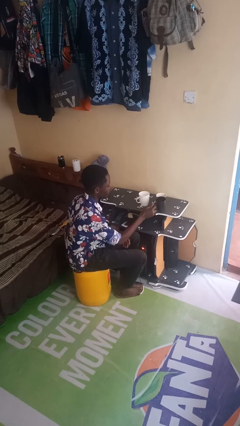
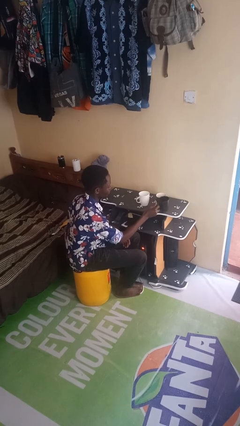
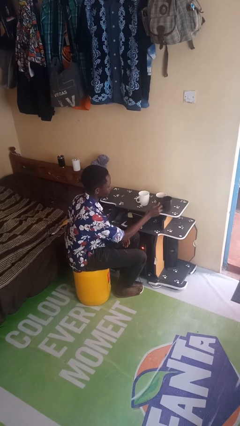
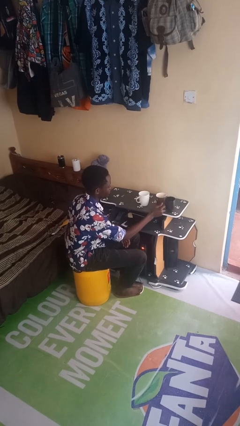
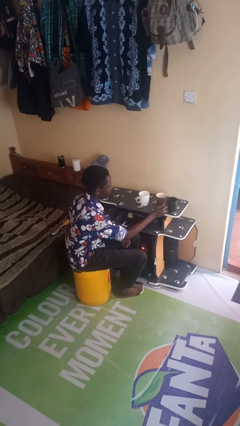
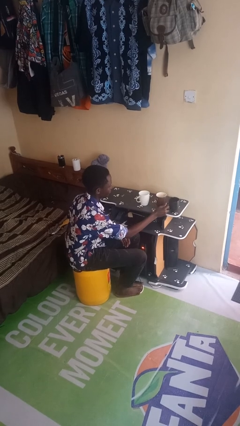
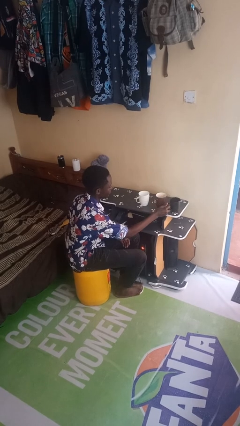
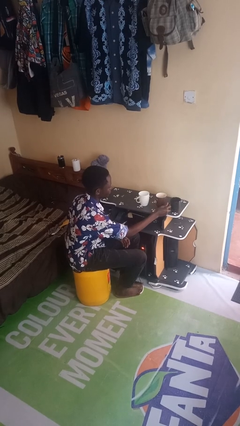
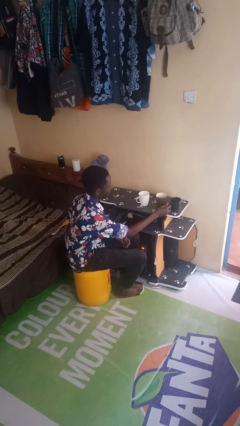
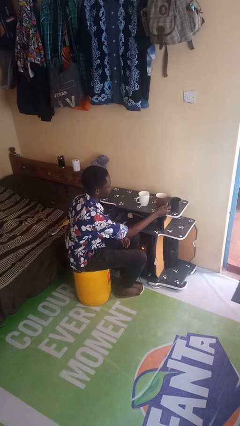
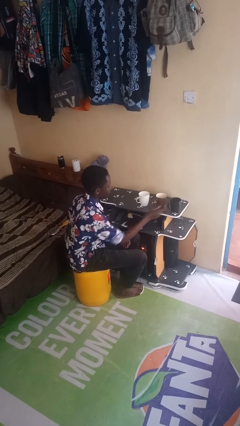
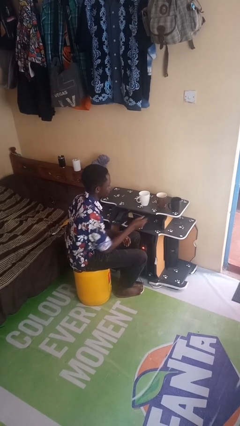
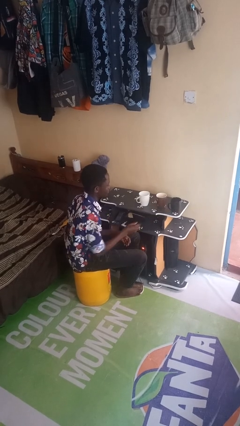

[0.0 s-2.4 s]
person puts down object on table

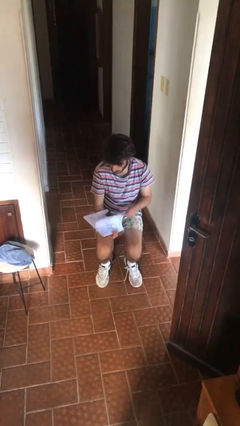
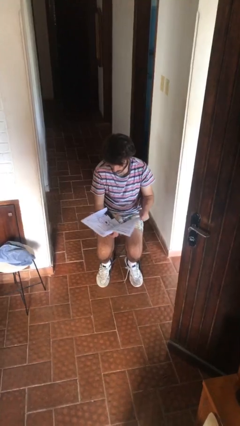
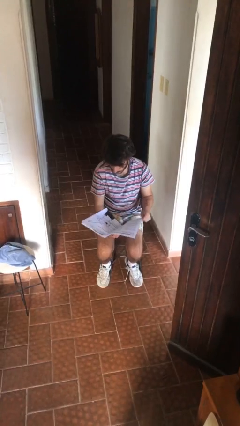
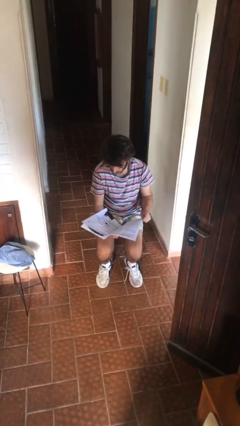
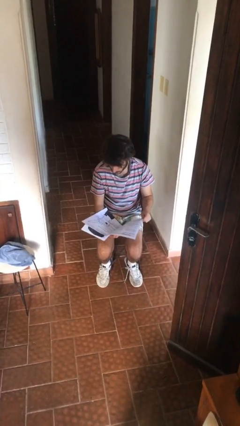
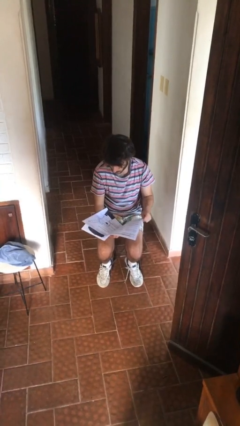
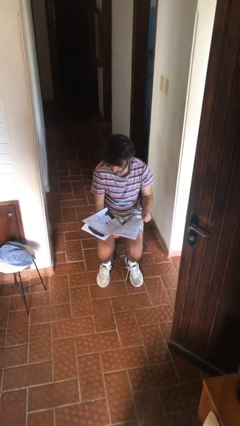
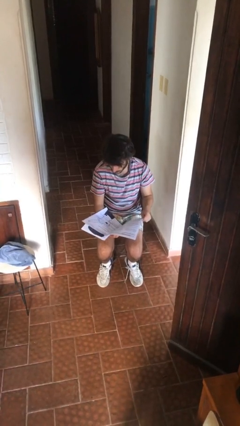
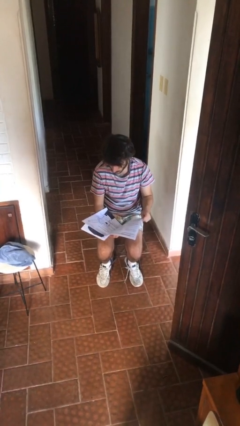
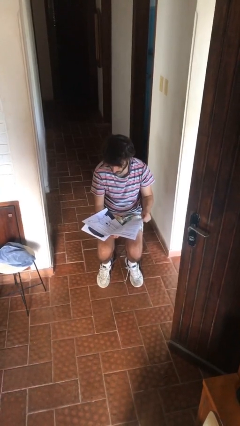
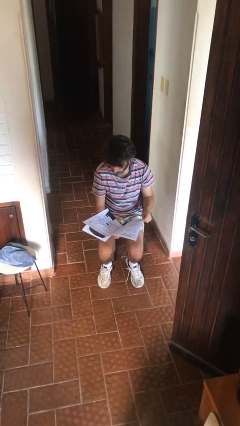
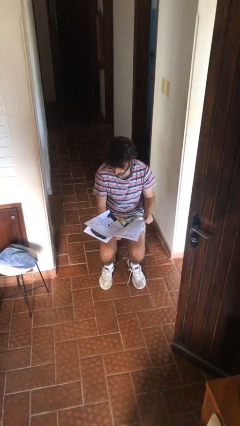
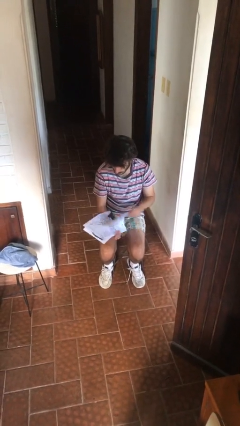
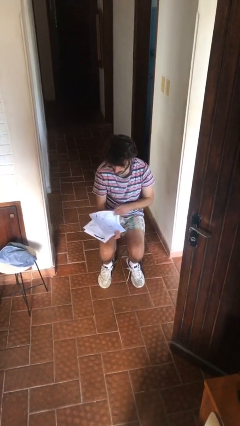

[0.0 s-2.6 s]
person reads document

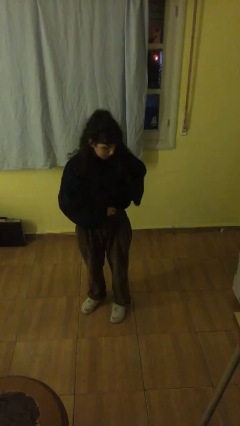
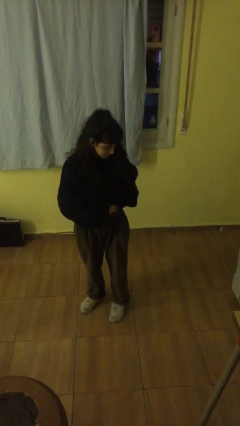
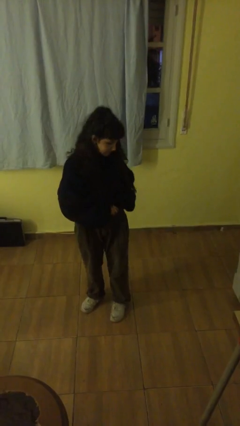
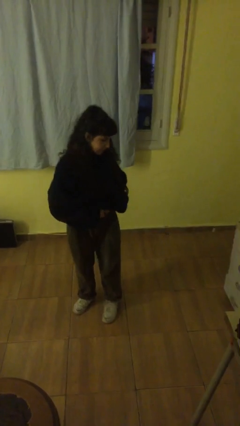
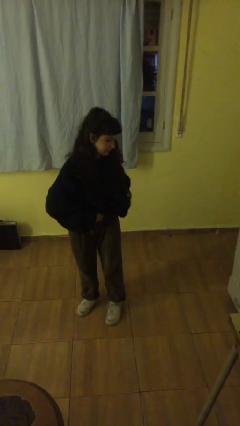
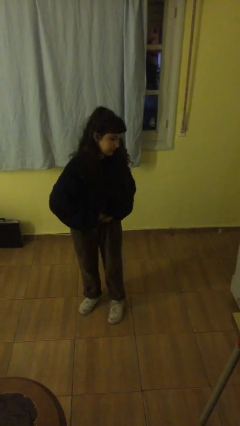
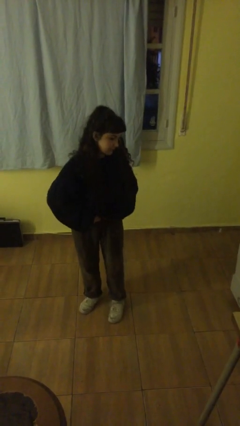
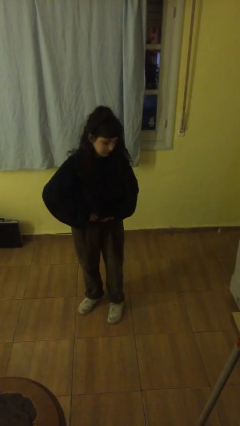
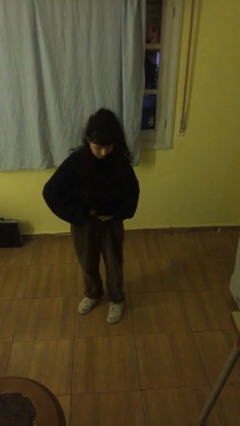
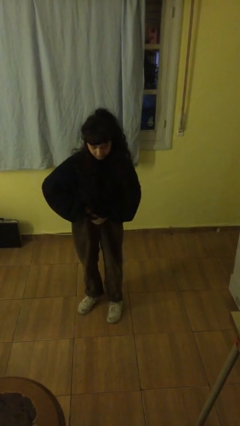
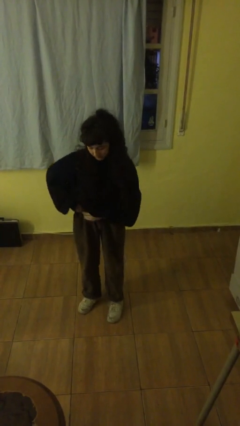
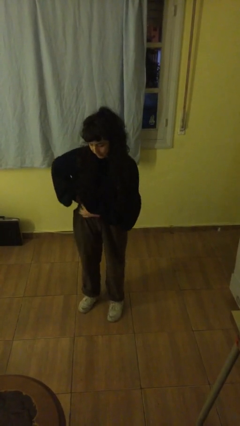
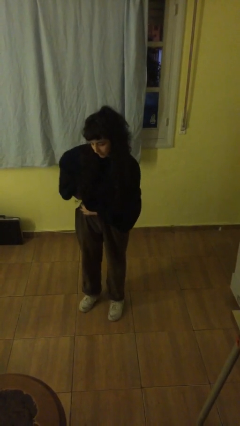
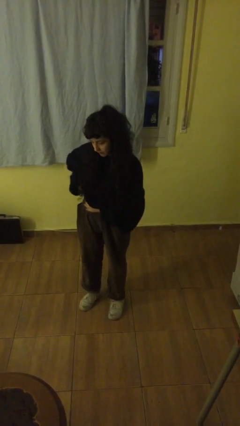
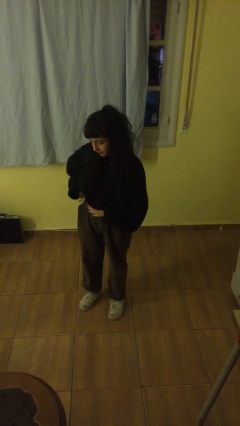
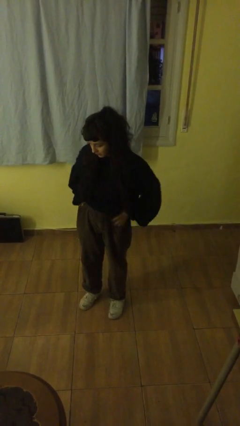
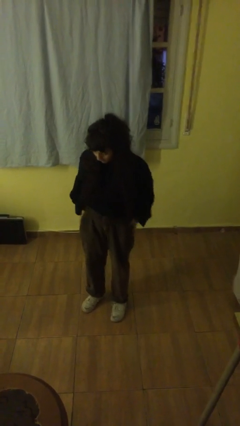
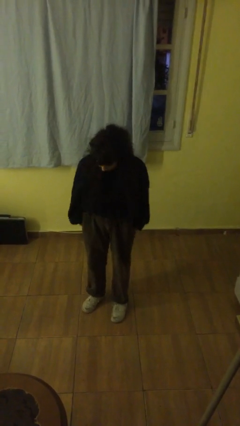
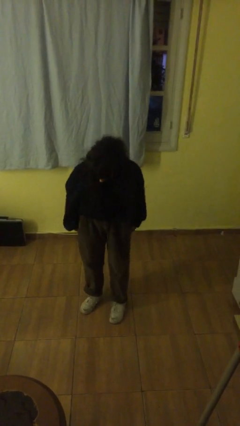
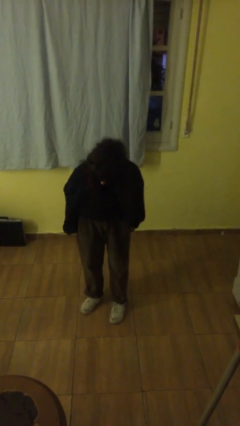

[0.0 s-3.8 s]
person hikes up pants

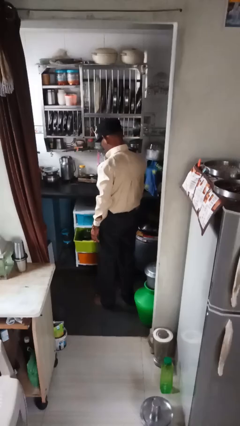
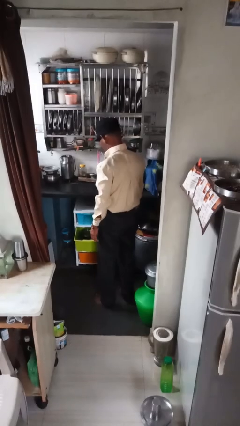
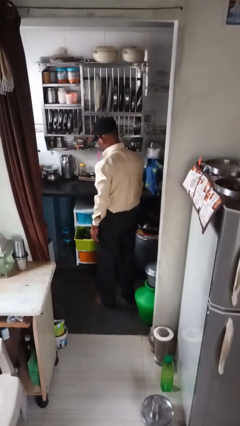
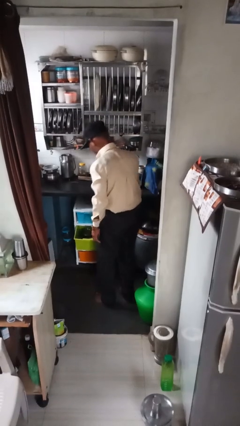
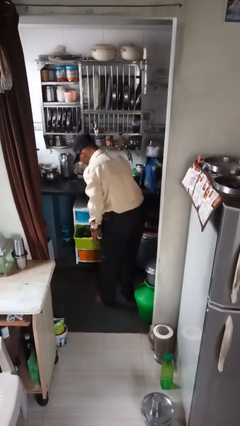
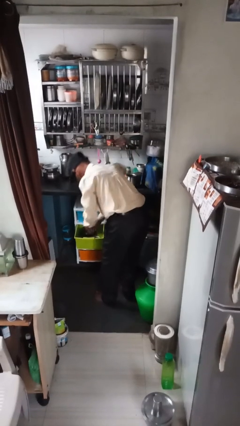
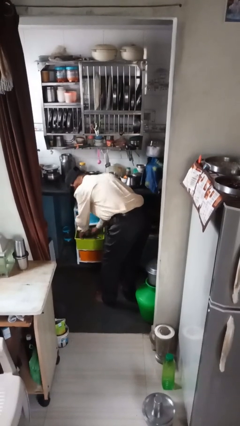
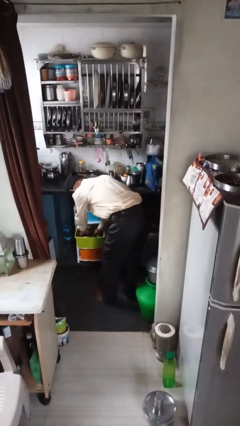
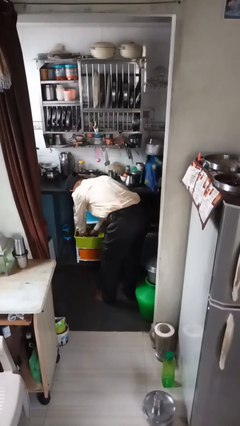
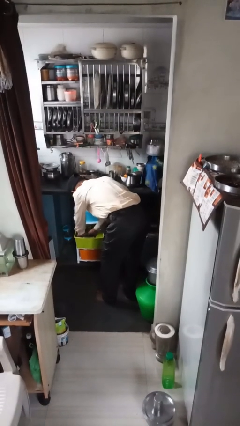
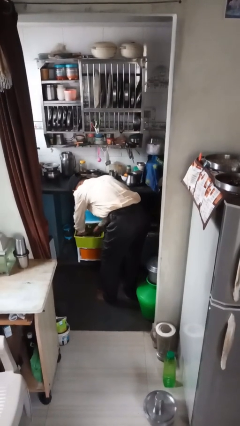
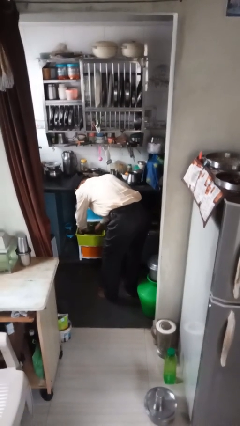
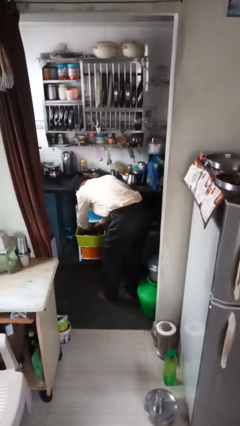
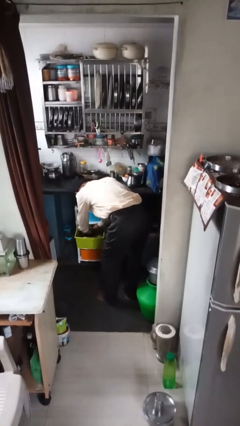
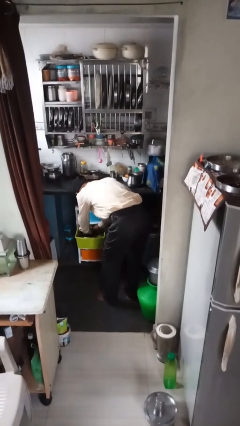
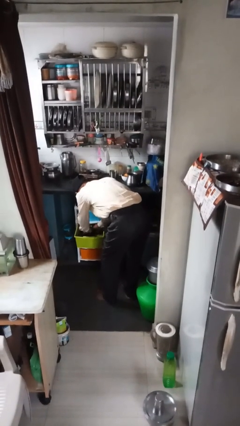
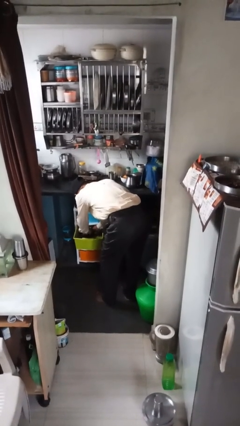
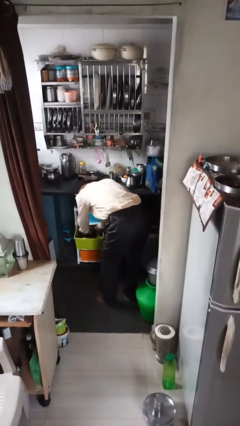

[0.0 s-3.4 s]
person searches in kitchen drawer

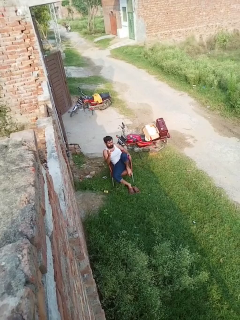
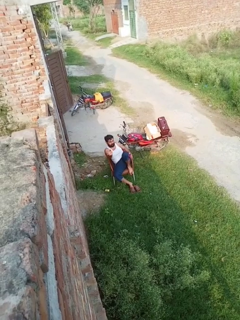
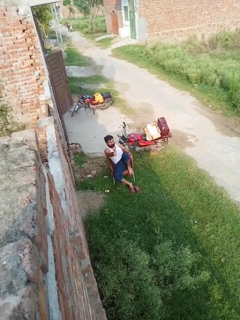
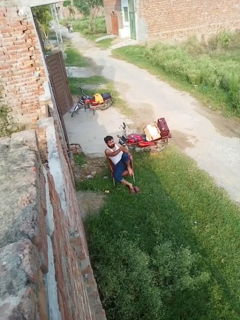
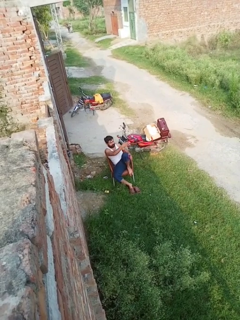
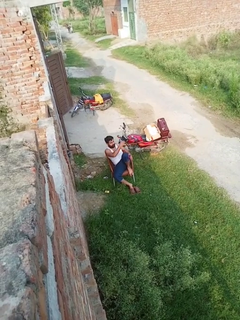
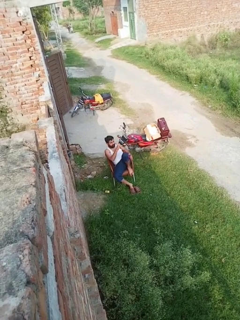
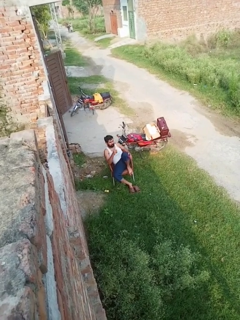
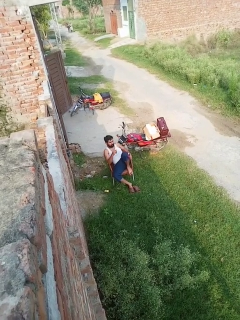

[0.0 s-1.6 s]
person gestures swipe left

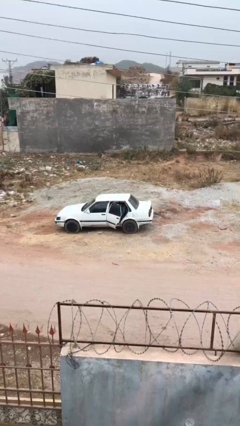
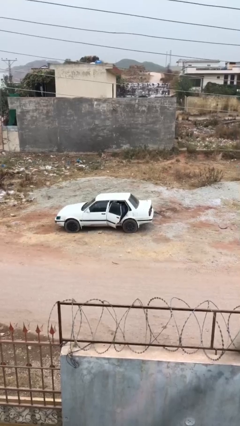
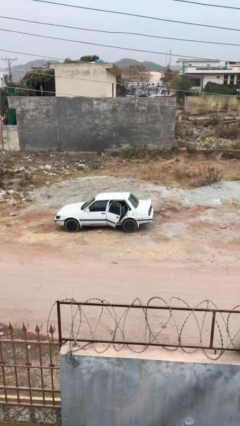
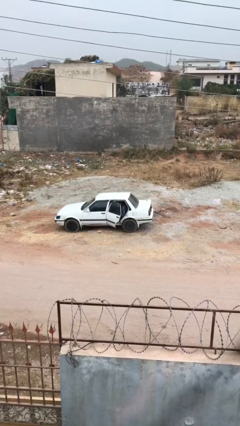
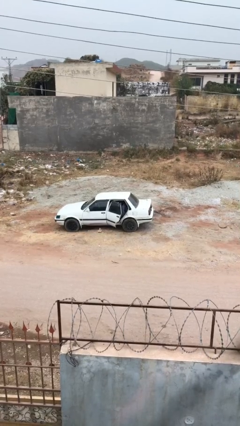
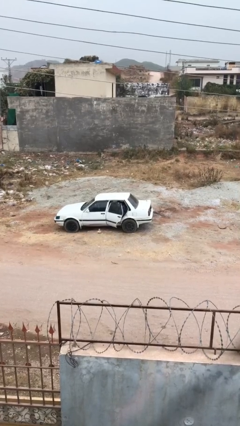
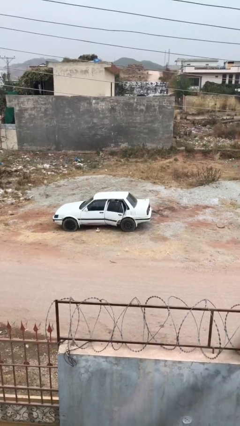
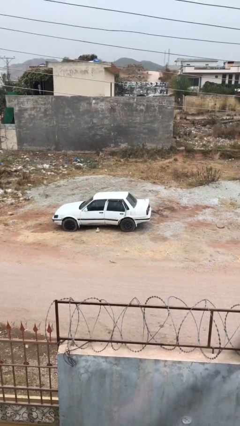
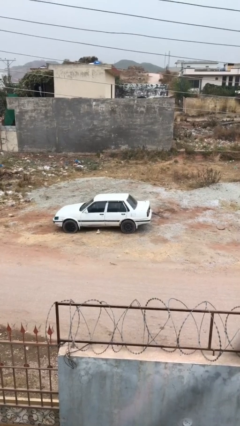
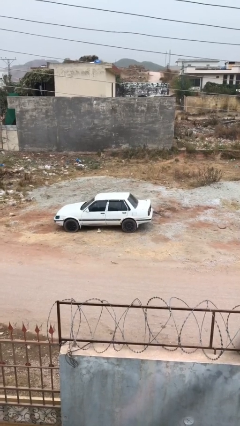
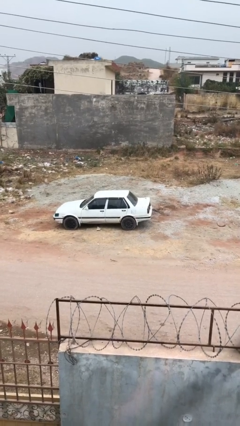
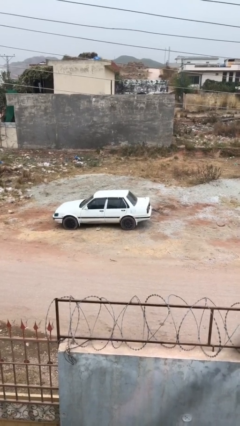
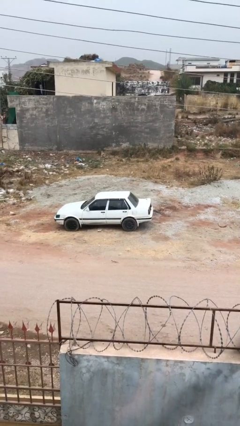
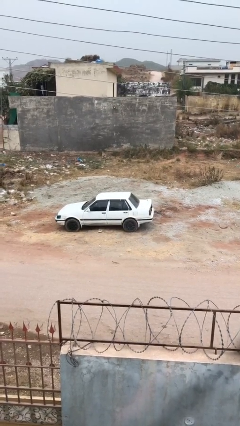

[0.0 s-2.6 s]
person closes car door

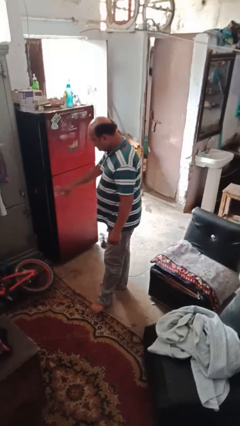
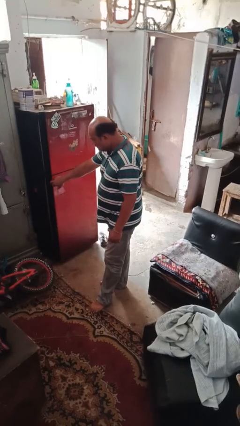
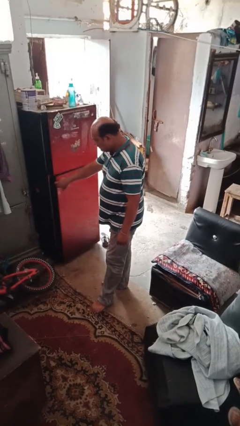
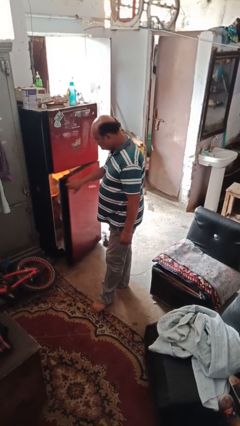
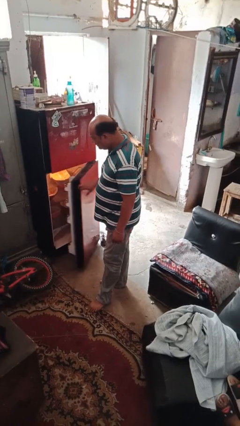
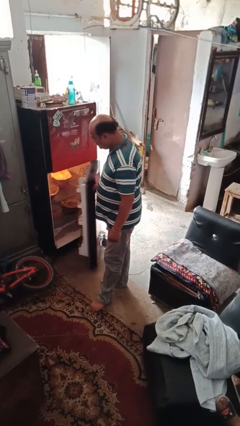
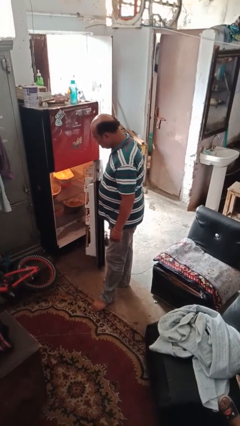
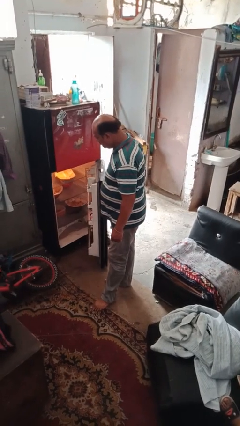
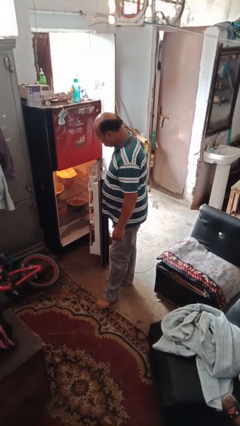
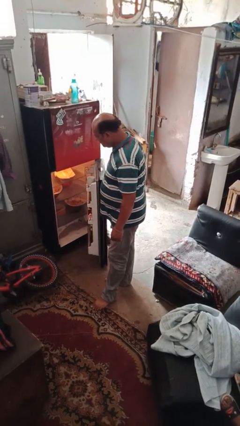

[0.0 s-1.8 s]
person opens refrigerator
